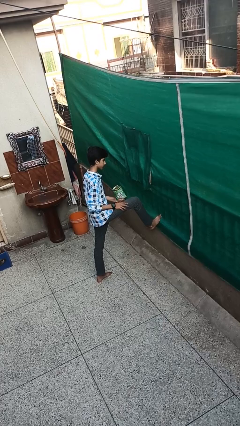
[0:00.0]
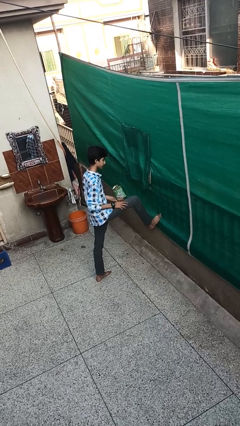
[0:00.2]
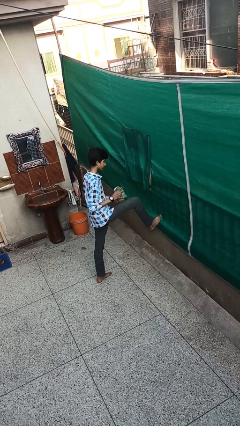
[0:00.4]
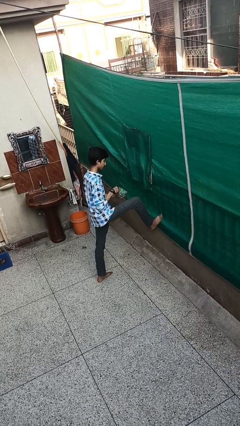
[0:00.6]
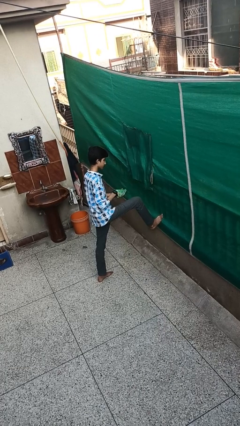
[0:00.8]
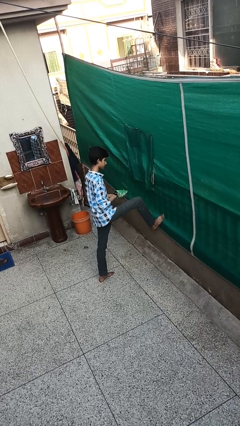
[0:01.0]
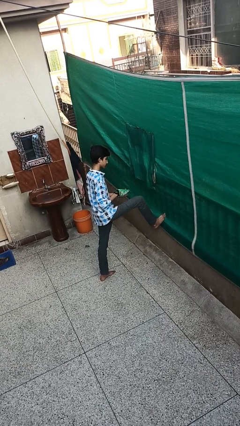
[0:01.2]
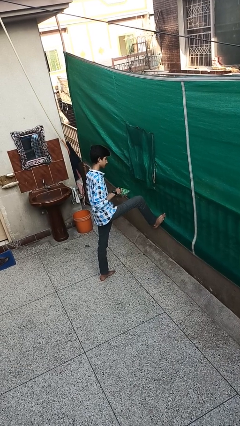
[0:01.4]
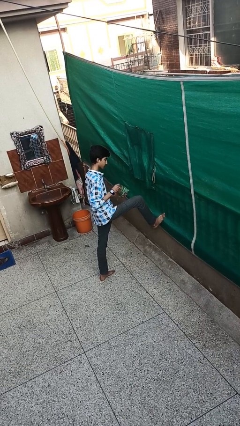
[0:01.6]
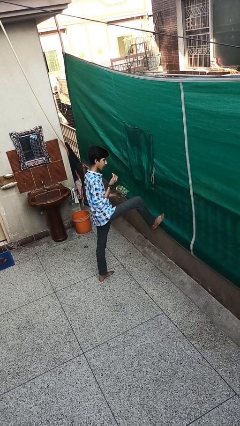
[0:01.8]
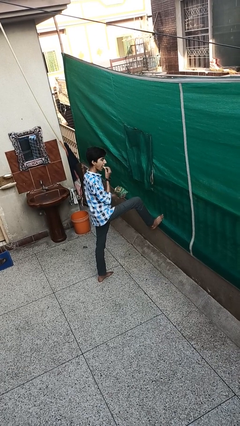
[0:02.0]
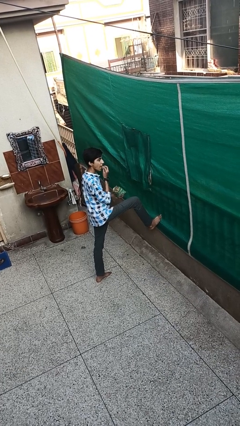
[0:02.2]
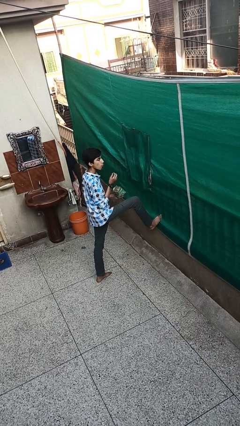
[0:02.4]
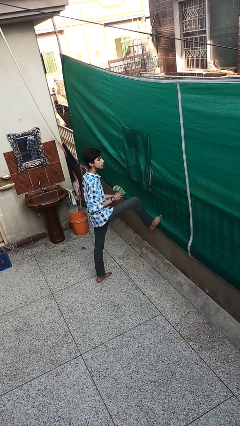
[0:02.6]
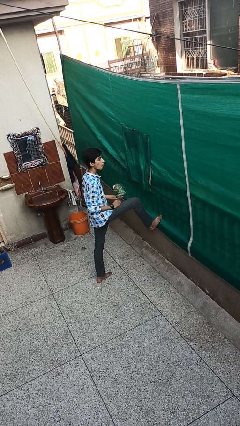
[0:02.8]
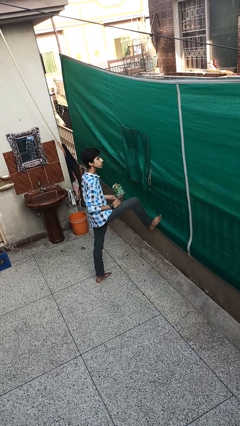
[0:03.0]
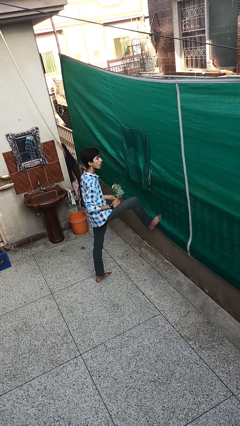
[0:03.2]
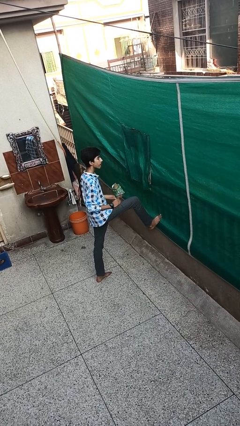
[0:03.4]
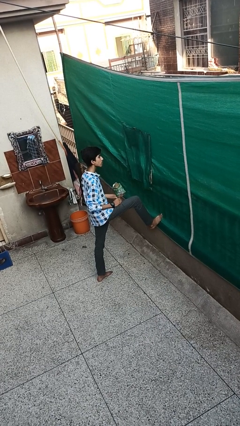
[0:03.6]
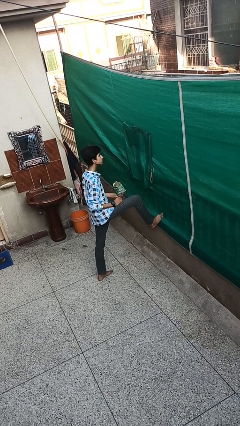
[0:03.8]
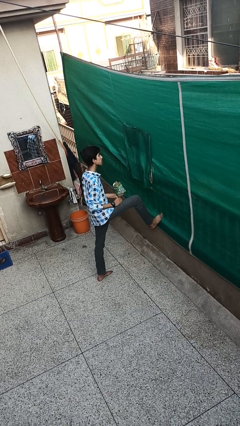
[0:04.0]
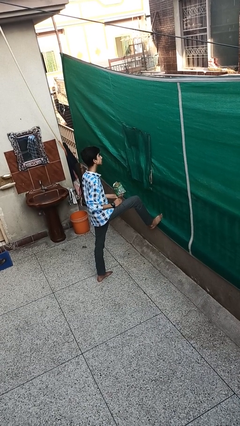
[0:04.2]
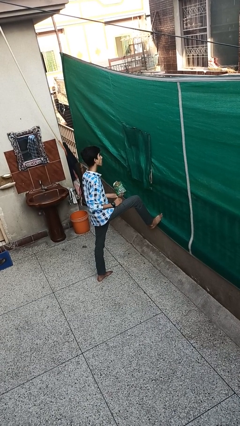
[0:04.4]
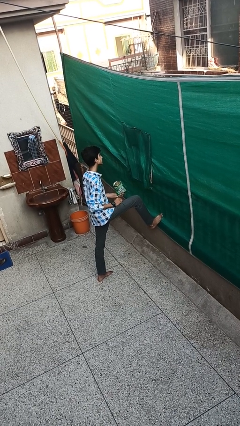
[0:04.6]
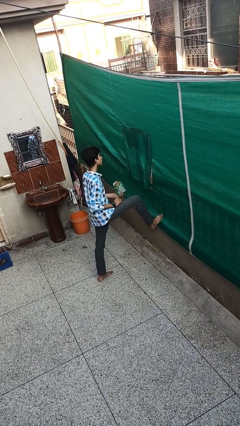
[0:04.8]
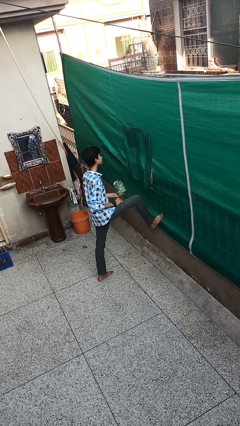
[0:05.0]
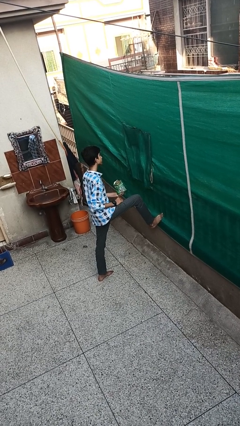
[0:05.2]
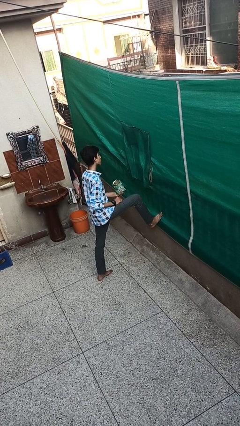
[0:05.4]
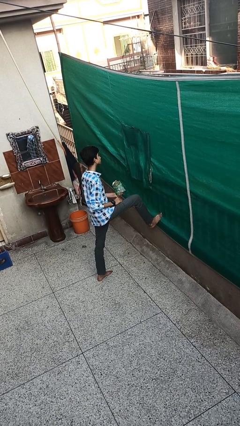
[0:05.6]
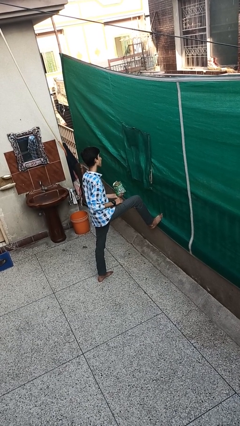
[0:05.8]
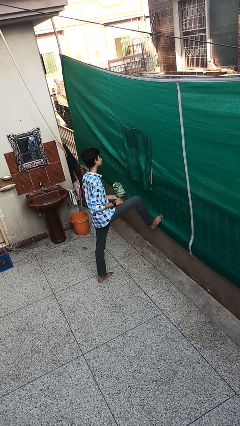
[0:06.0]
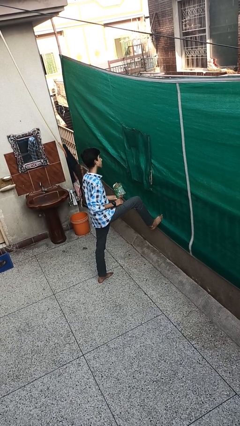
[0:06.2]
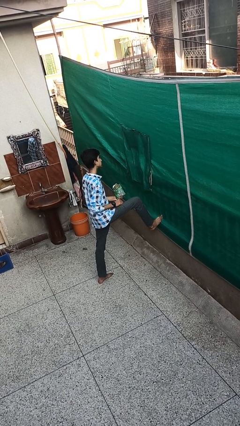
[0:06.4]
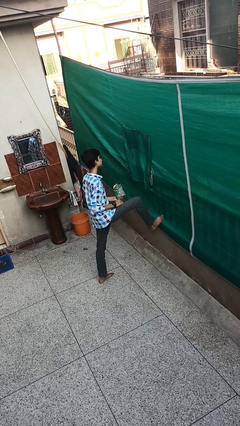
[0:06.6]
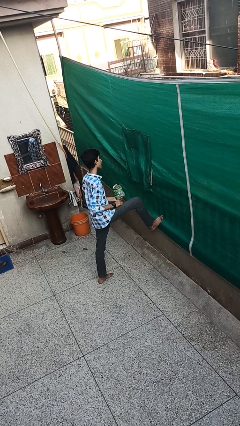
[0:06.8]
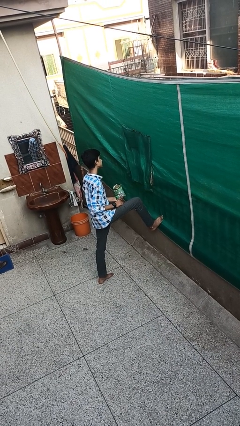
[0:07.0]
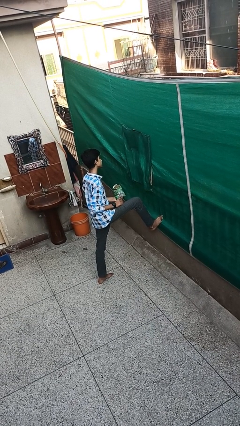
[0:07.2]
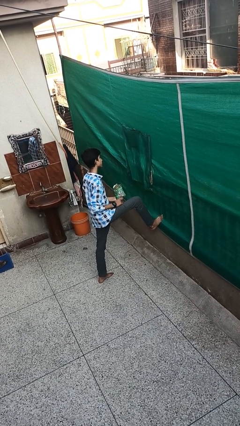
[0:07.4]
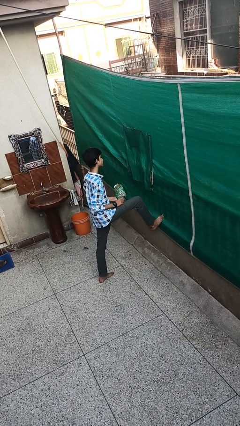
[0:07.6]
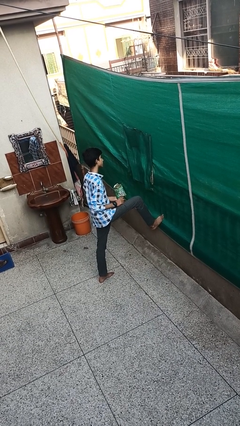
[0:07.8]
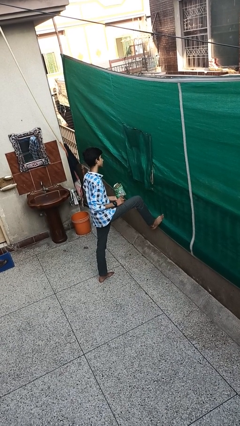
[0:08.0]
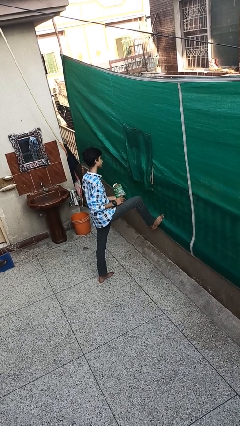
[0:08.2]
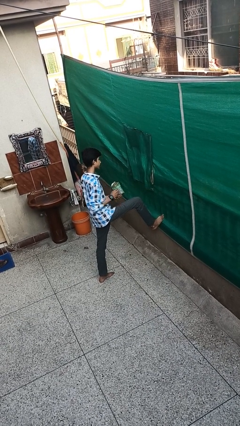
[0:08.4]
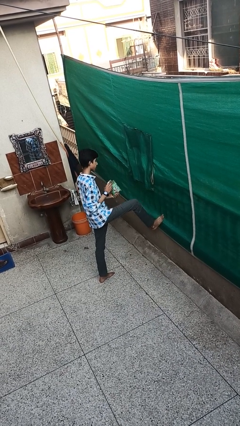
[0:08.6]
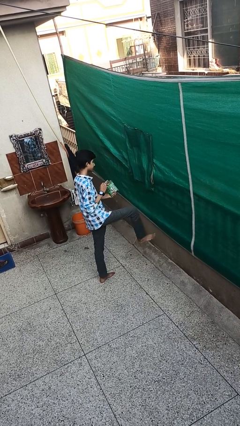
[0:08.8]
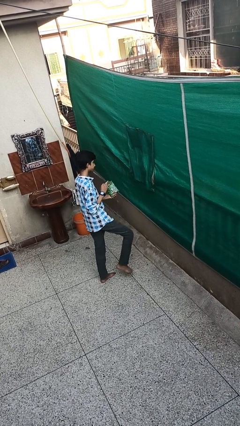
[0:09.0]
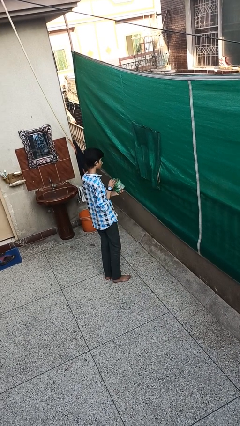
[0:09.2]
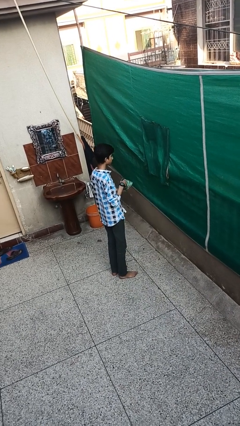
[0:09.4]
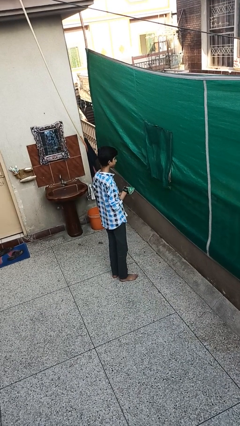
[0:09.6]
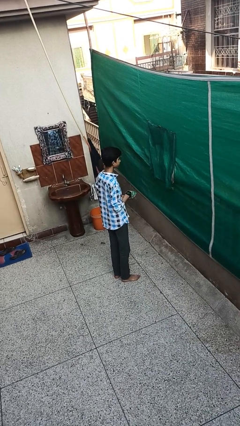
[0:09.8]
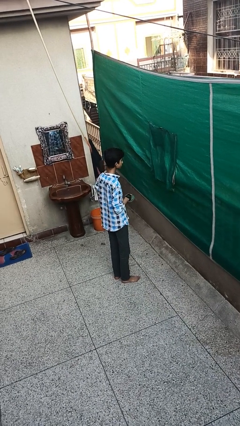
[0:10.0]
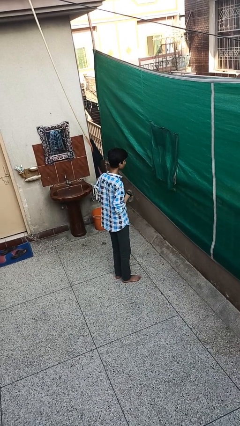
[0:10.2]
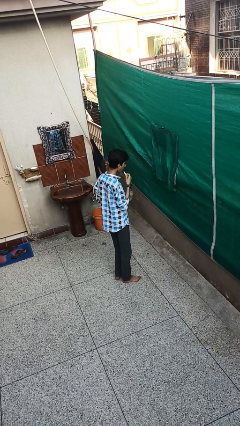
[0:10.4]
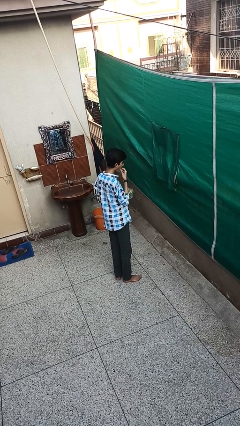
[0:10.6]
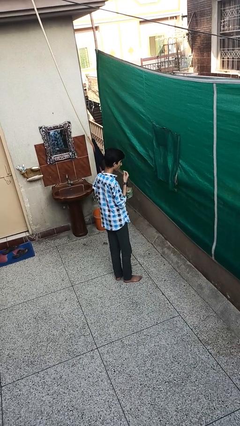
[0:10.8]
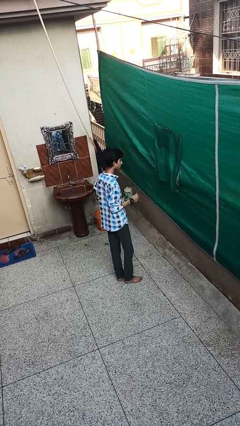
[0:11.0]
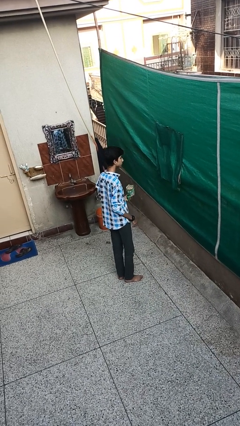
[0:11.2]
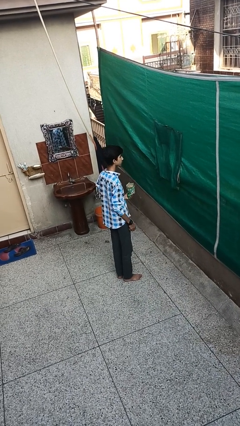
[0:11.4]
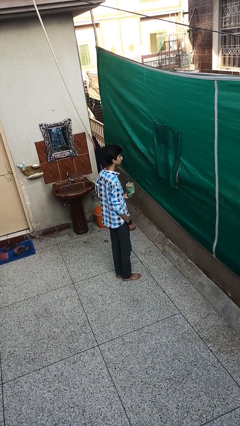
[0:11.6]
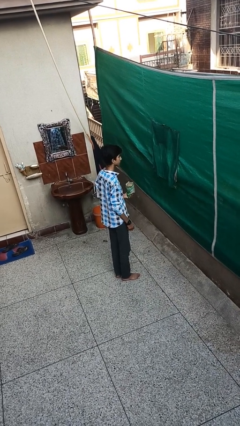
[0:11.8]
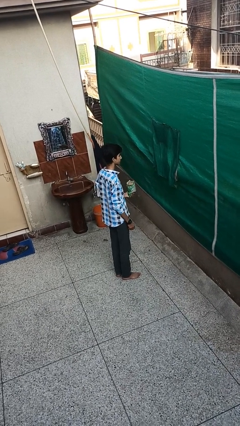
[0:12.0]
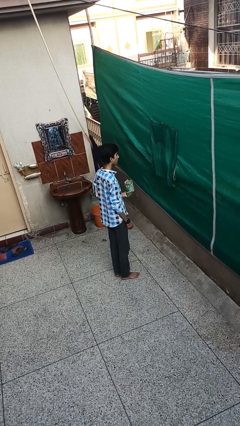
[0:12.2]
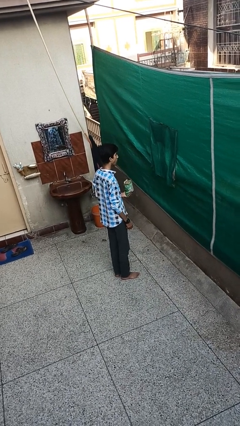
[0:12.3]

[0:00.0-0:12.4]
person eats snack from bag

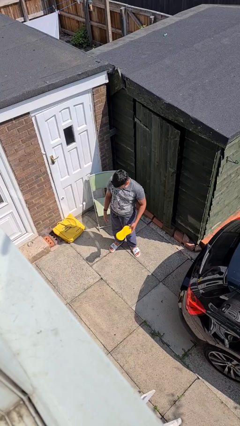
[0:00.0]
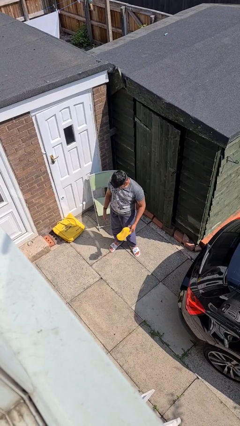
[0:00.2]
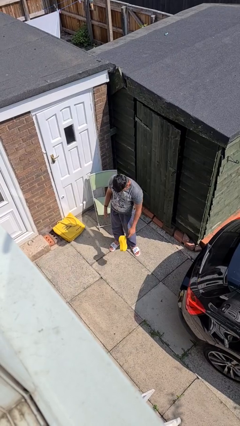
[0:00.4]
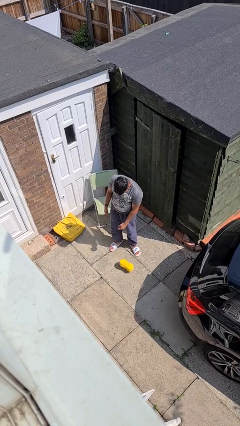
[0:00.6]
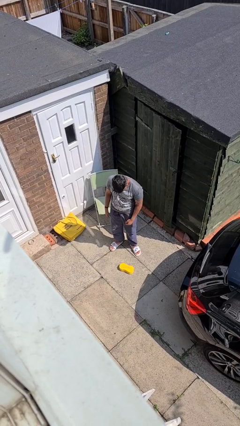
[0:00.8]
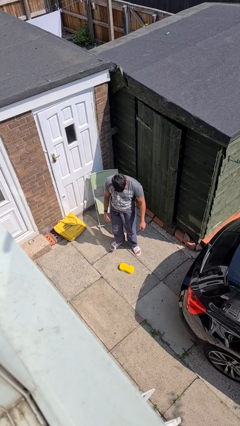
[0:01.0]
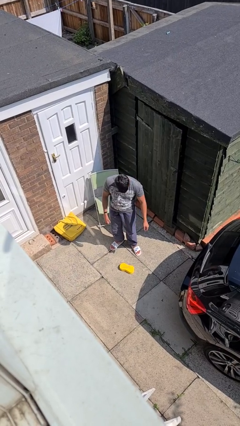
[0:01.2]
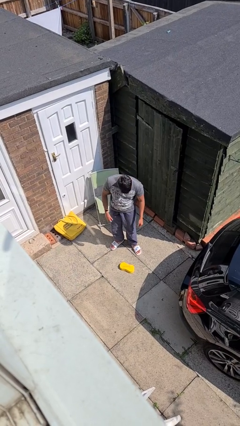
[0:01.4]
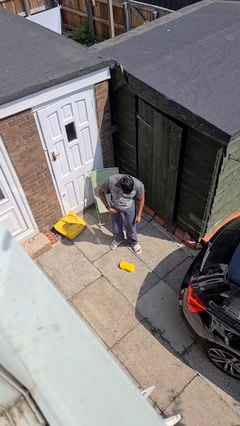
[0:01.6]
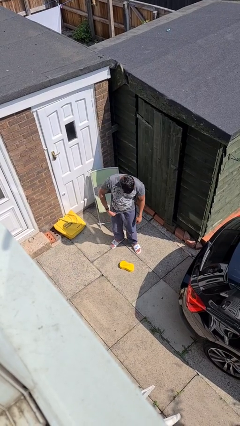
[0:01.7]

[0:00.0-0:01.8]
person drops object

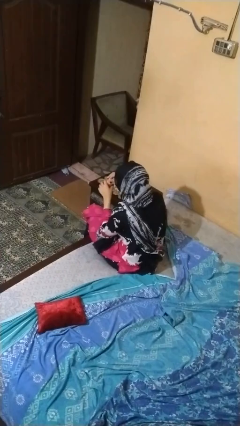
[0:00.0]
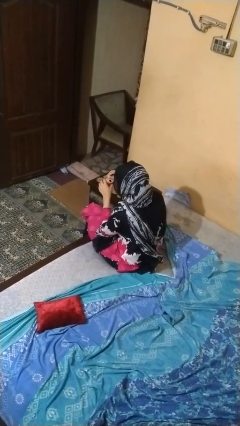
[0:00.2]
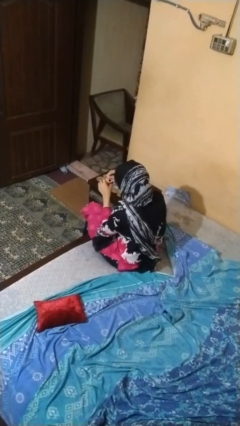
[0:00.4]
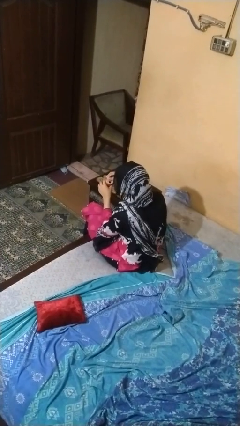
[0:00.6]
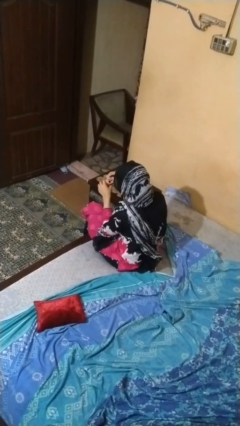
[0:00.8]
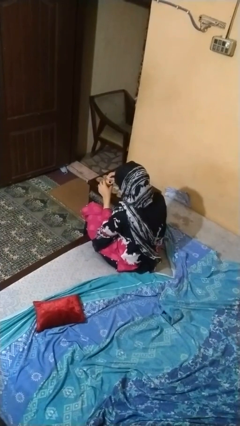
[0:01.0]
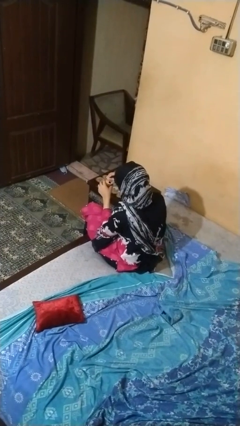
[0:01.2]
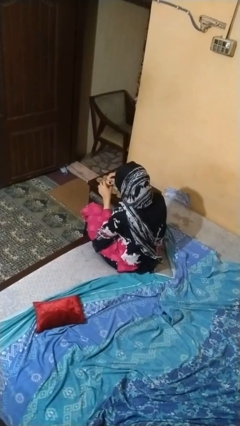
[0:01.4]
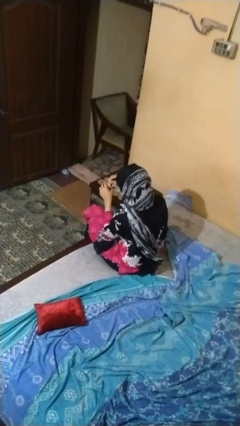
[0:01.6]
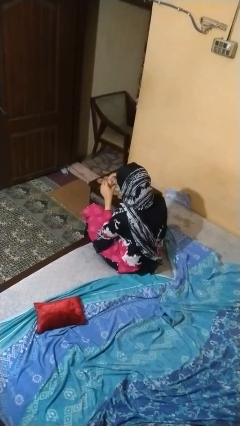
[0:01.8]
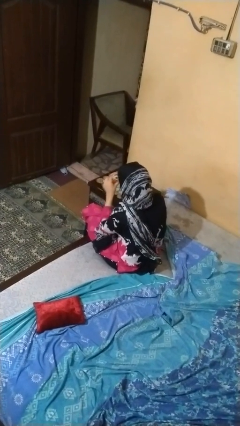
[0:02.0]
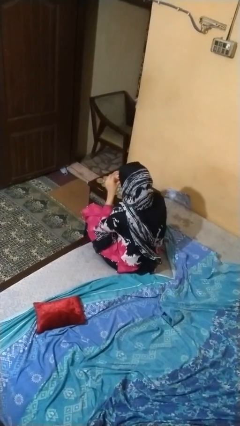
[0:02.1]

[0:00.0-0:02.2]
person opens beverage can

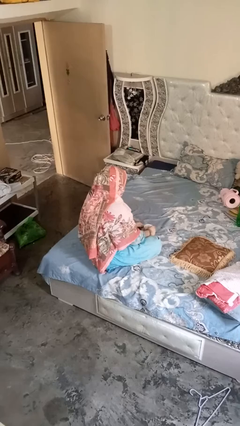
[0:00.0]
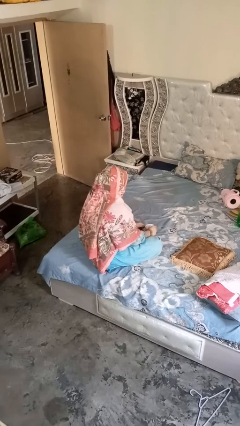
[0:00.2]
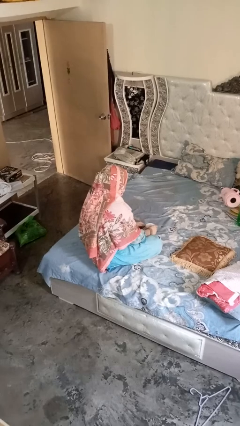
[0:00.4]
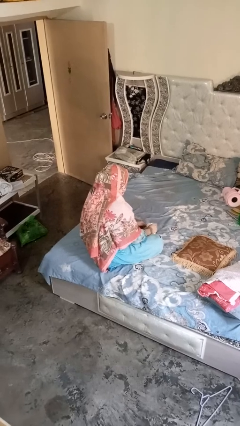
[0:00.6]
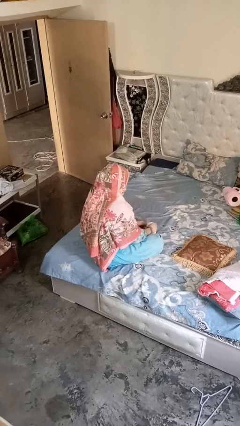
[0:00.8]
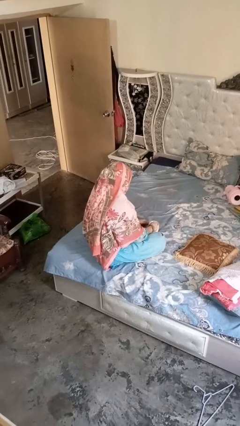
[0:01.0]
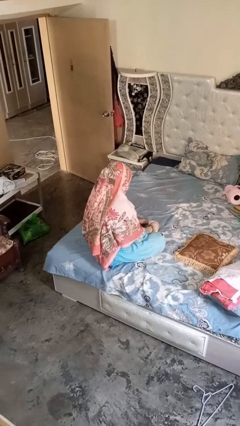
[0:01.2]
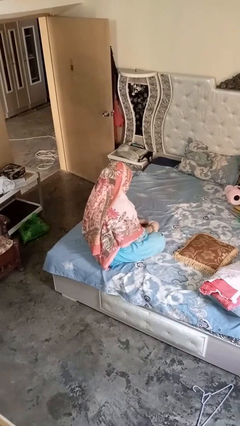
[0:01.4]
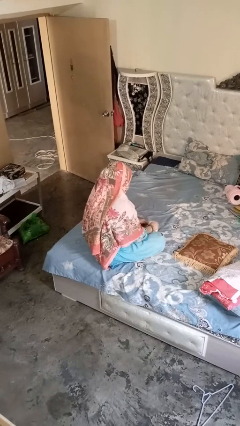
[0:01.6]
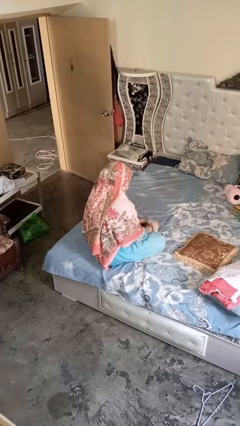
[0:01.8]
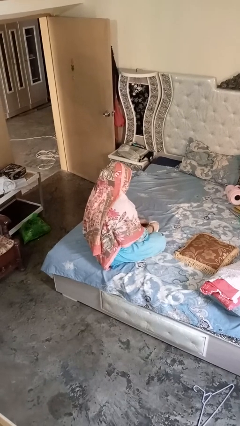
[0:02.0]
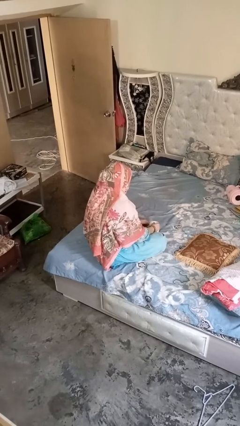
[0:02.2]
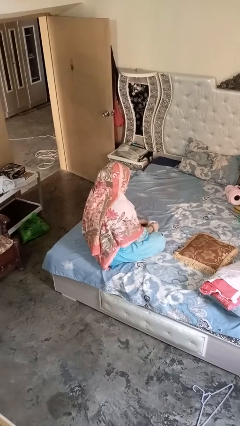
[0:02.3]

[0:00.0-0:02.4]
person stirs mug
